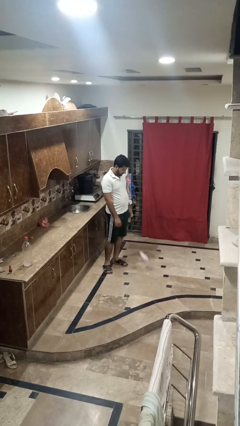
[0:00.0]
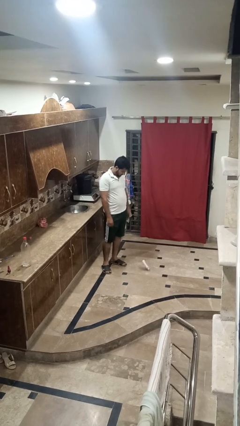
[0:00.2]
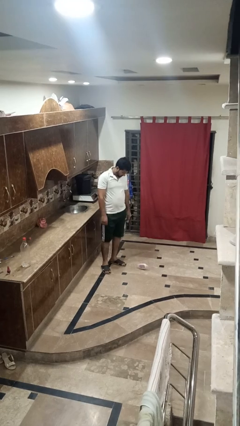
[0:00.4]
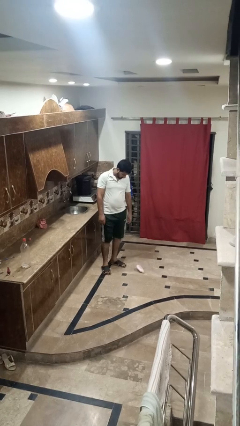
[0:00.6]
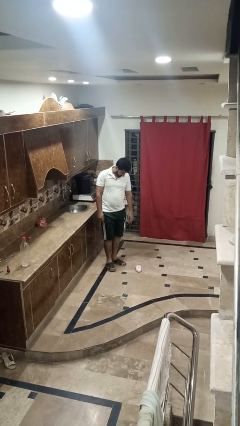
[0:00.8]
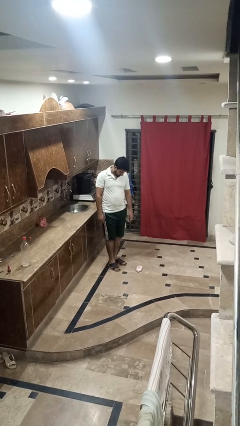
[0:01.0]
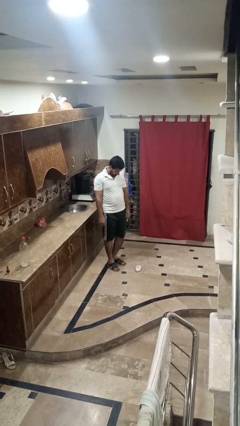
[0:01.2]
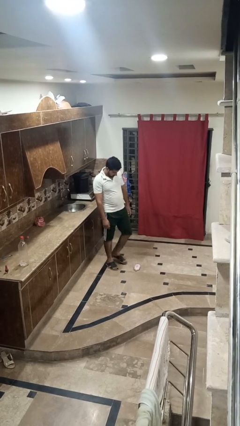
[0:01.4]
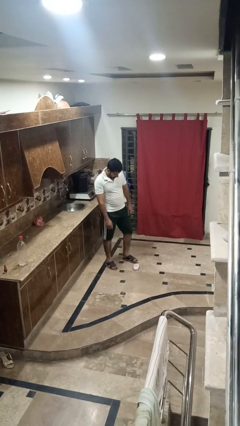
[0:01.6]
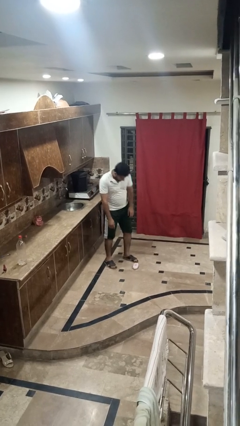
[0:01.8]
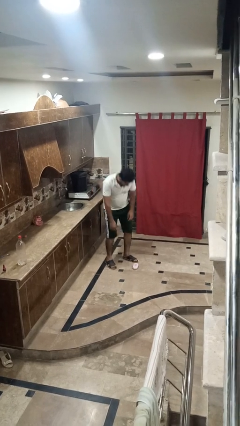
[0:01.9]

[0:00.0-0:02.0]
person throws object to ground

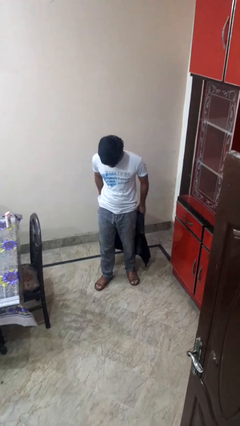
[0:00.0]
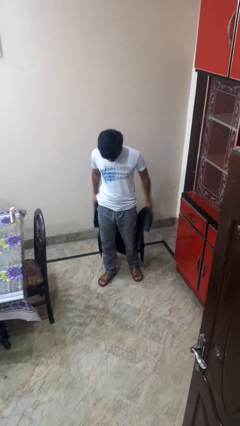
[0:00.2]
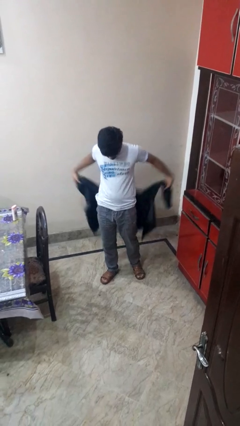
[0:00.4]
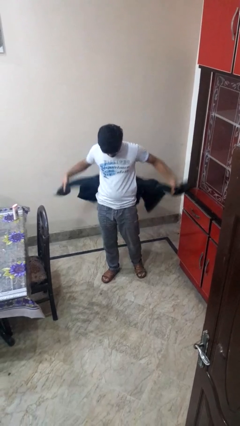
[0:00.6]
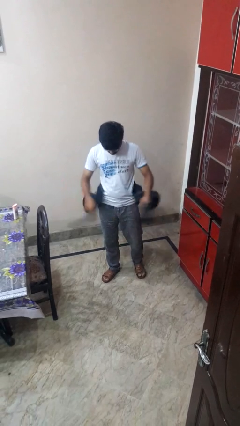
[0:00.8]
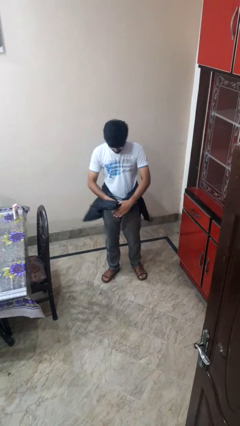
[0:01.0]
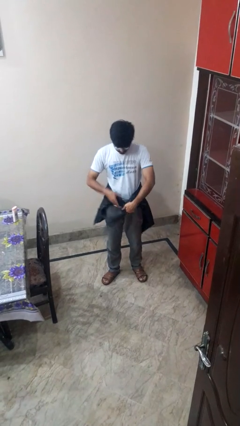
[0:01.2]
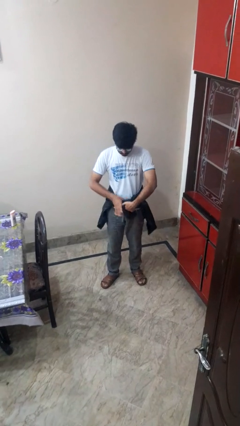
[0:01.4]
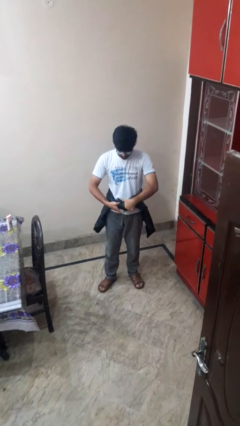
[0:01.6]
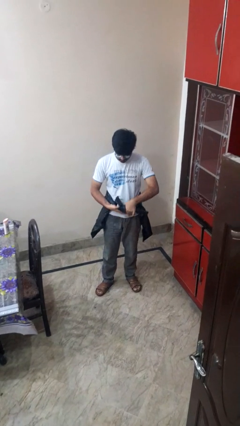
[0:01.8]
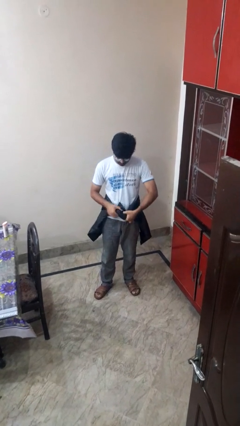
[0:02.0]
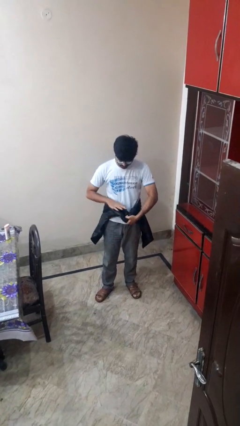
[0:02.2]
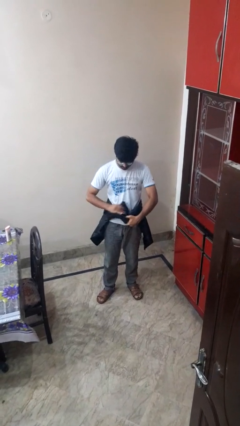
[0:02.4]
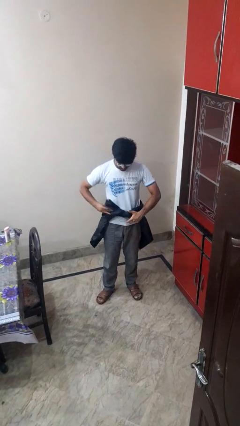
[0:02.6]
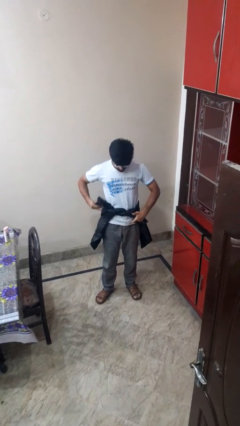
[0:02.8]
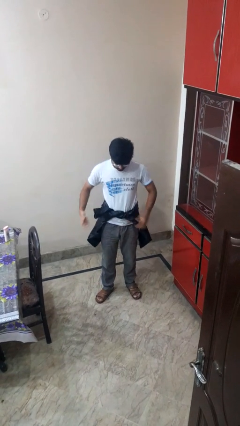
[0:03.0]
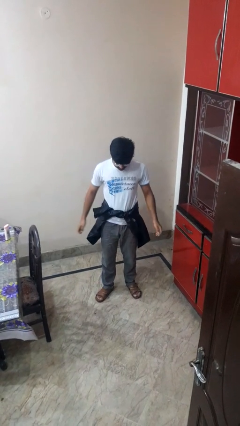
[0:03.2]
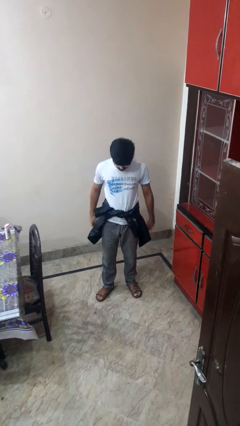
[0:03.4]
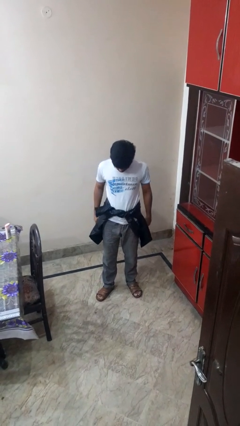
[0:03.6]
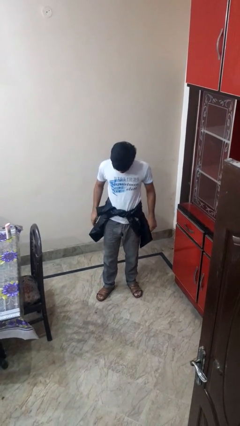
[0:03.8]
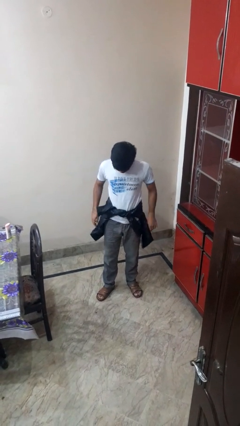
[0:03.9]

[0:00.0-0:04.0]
person ties jacket around waist

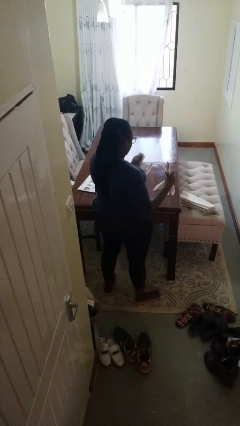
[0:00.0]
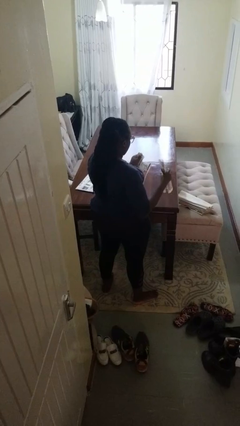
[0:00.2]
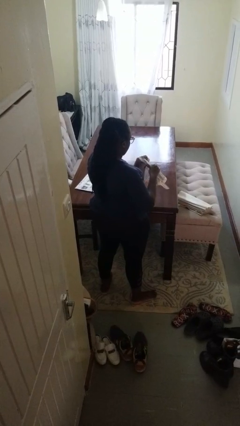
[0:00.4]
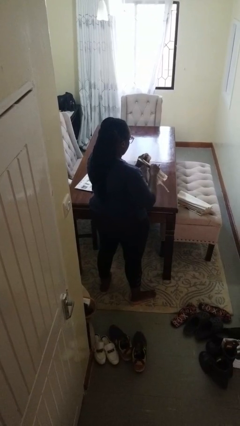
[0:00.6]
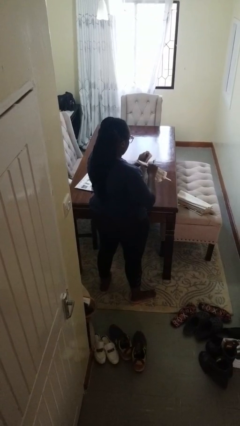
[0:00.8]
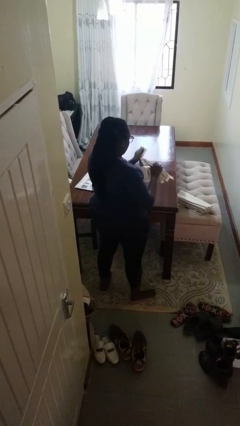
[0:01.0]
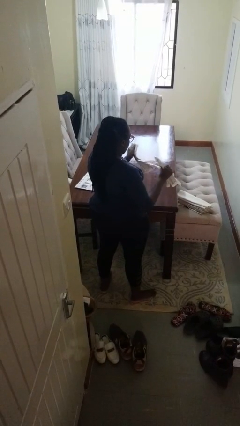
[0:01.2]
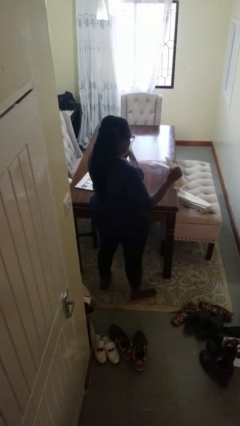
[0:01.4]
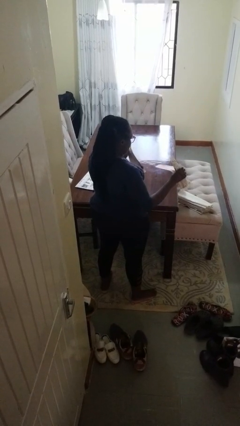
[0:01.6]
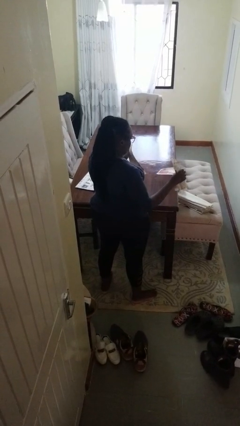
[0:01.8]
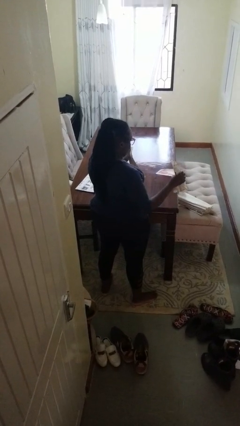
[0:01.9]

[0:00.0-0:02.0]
person tears paper

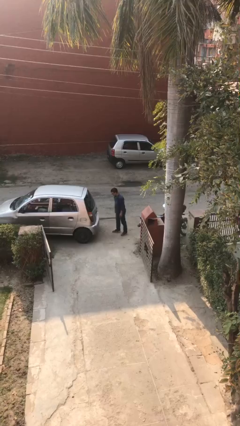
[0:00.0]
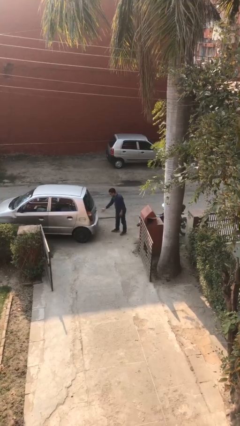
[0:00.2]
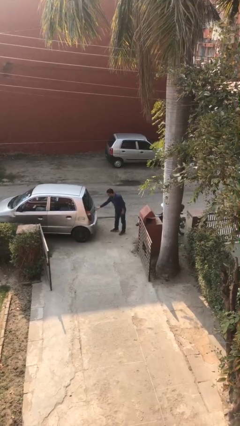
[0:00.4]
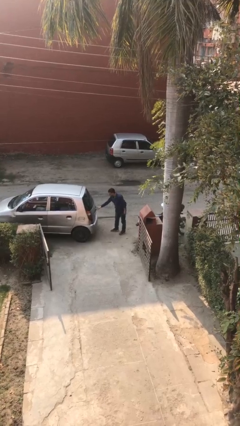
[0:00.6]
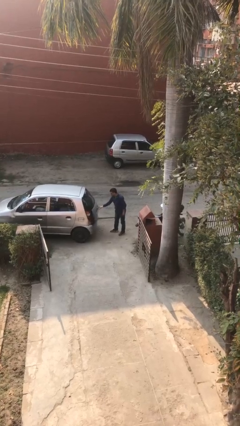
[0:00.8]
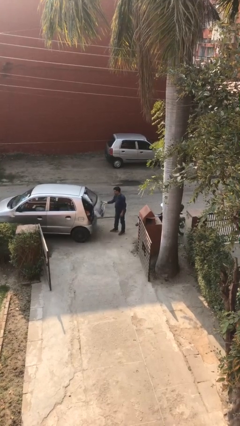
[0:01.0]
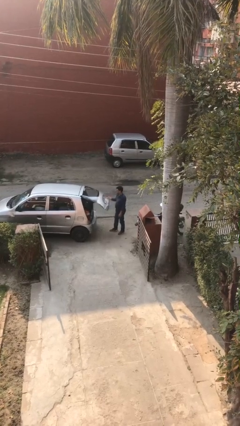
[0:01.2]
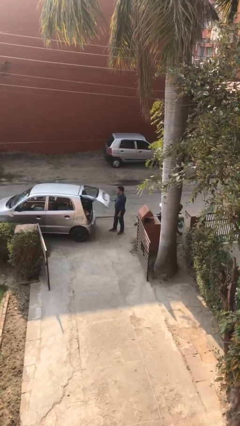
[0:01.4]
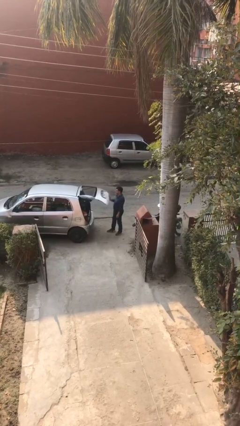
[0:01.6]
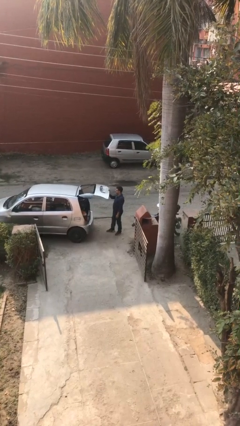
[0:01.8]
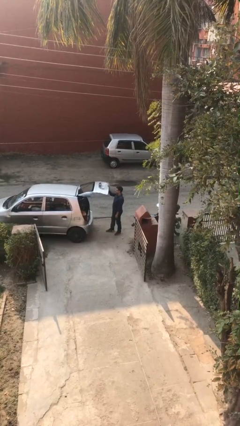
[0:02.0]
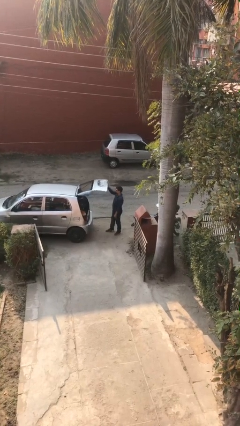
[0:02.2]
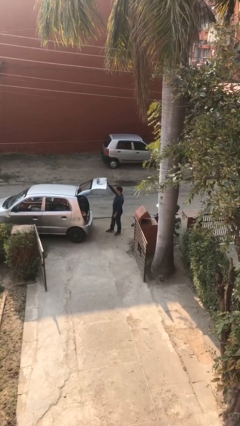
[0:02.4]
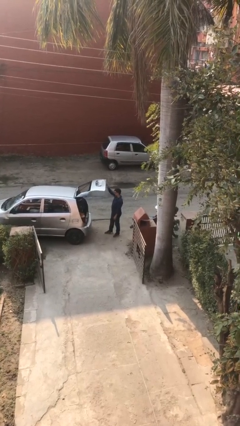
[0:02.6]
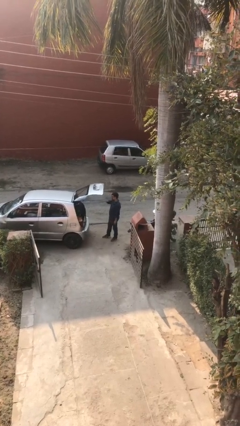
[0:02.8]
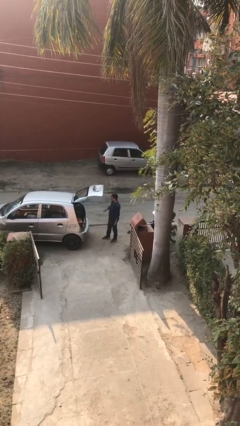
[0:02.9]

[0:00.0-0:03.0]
person opens car trunk

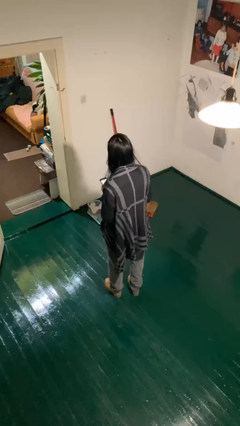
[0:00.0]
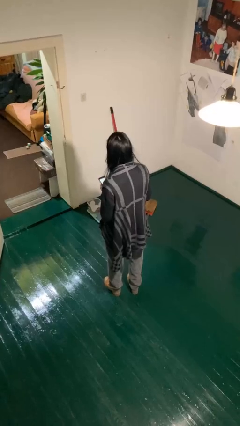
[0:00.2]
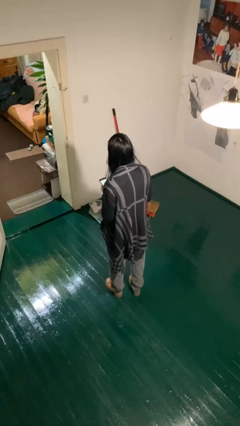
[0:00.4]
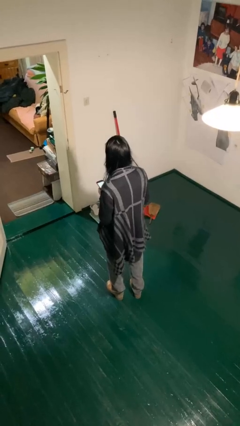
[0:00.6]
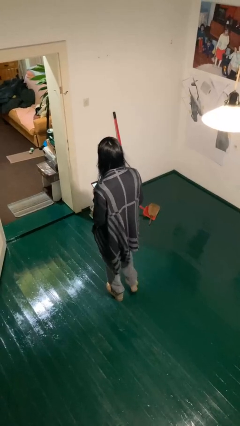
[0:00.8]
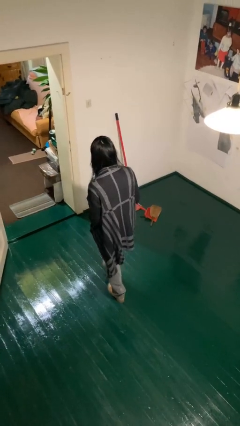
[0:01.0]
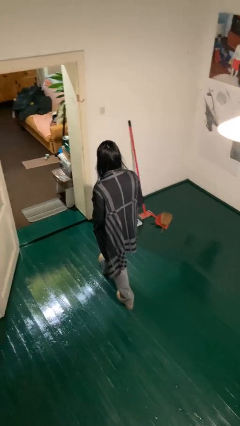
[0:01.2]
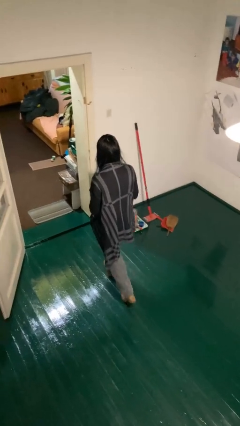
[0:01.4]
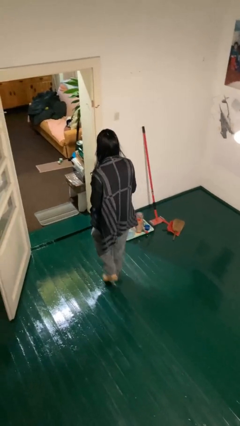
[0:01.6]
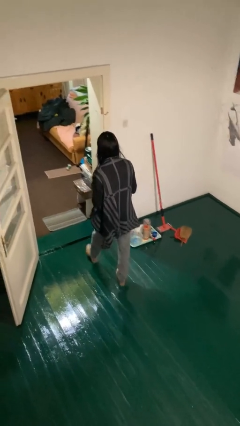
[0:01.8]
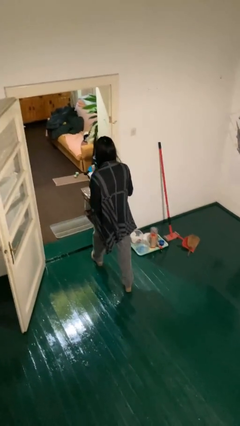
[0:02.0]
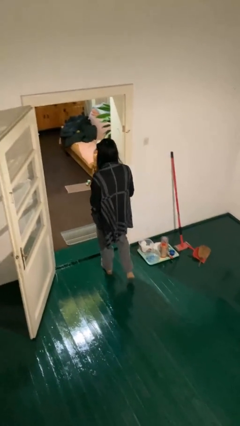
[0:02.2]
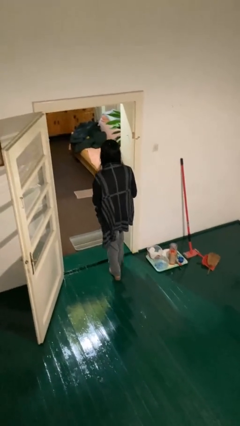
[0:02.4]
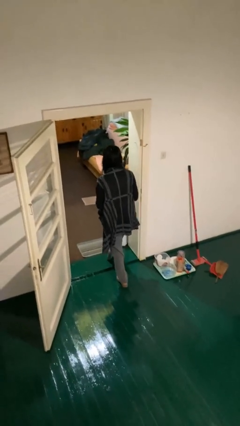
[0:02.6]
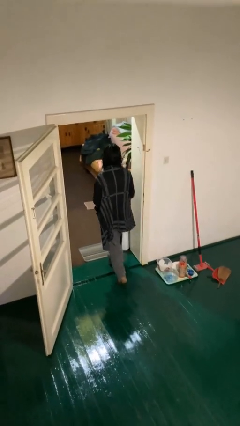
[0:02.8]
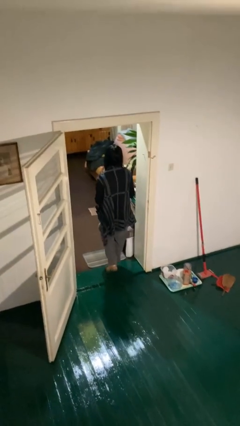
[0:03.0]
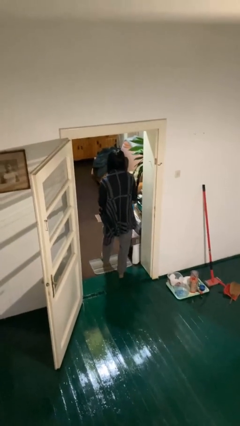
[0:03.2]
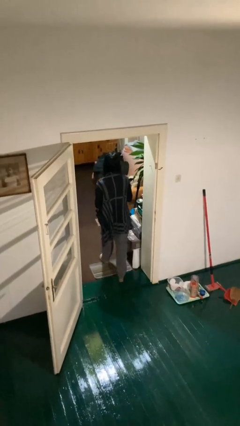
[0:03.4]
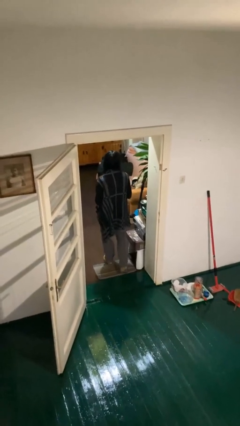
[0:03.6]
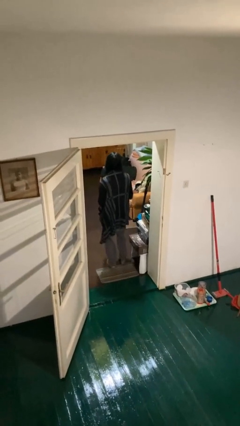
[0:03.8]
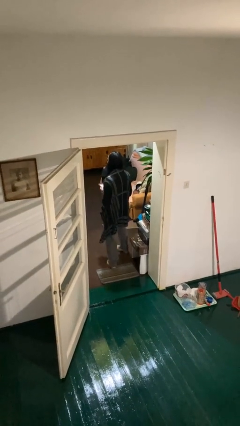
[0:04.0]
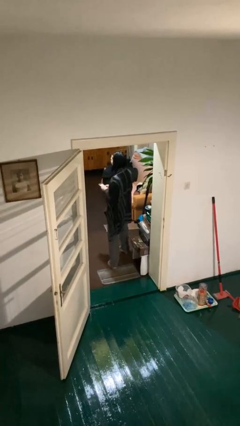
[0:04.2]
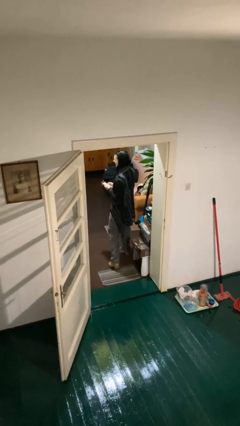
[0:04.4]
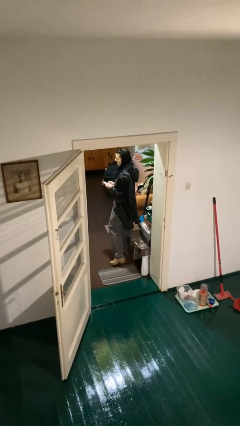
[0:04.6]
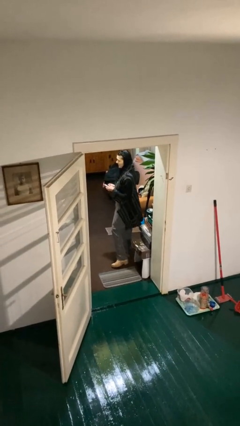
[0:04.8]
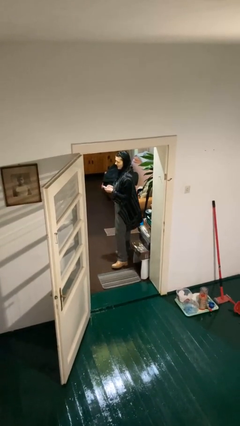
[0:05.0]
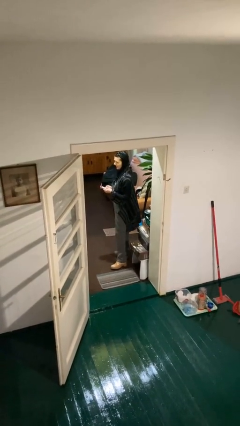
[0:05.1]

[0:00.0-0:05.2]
person exits scene through structure

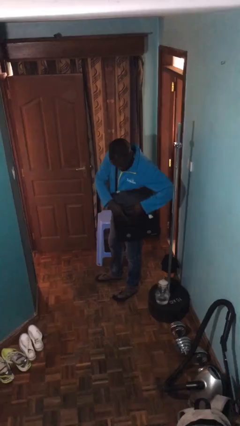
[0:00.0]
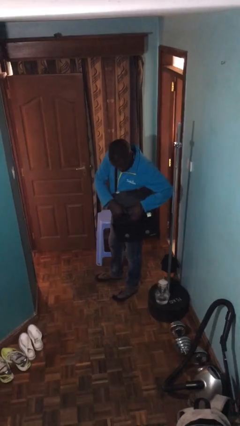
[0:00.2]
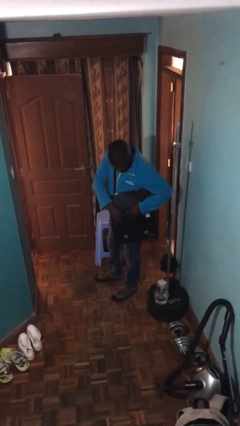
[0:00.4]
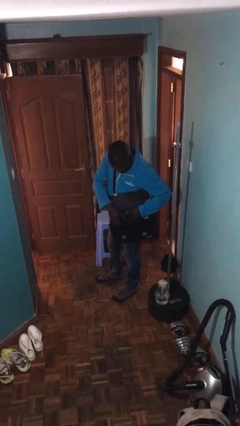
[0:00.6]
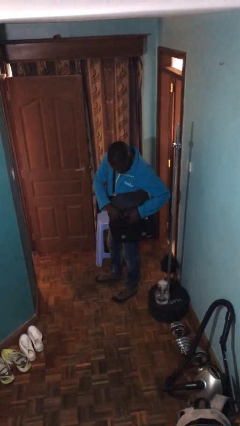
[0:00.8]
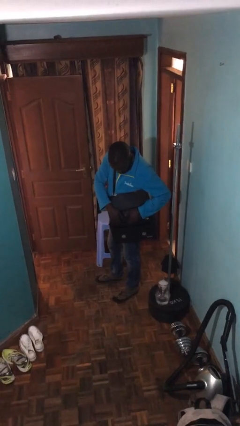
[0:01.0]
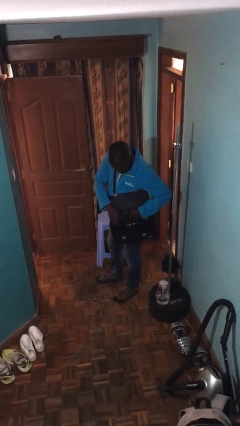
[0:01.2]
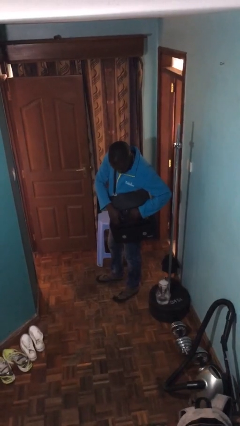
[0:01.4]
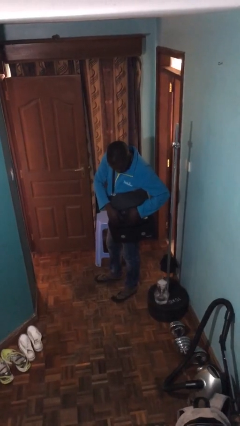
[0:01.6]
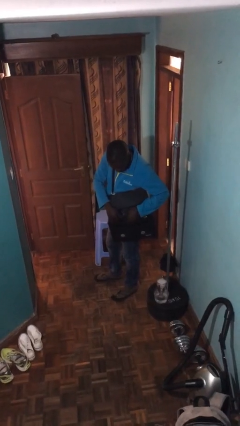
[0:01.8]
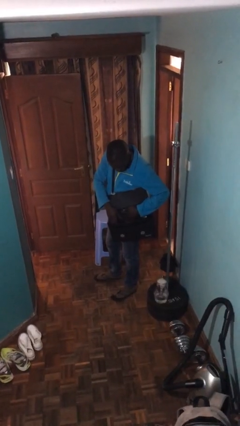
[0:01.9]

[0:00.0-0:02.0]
person searches in purse
